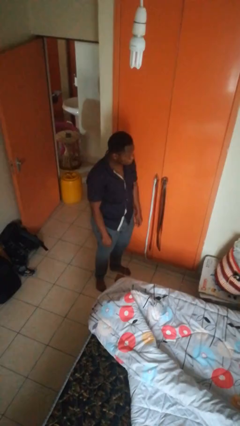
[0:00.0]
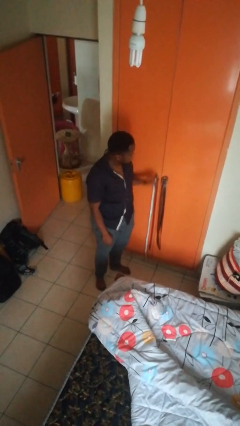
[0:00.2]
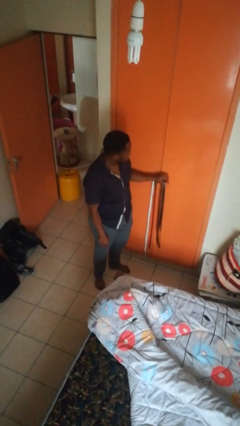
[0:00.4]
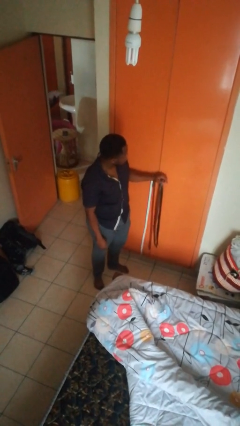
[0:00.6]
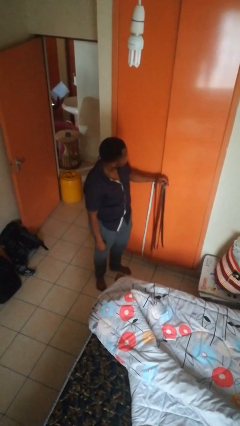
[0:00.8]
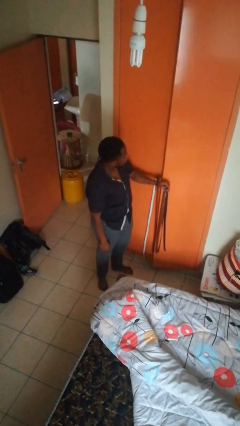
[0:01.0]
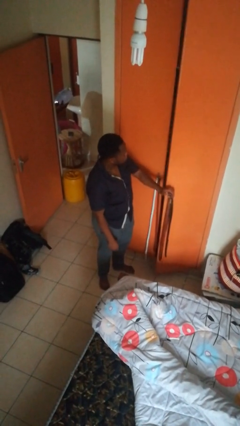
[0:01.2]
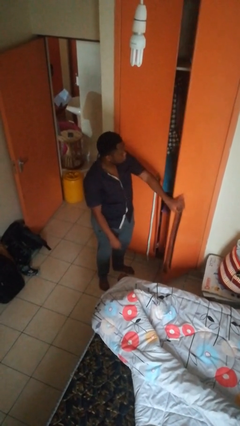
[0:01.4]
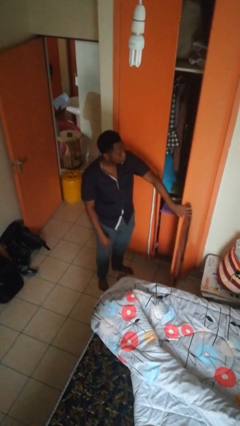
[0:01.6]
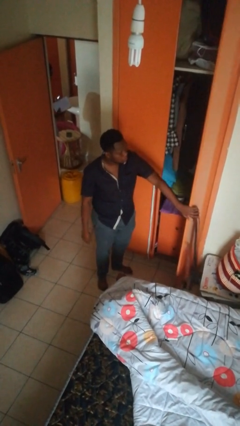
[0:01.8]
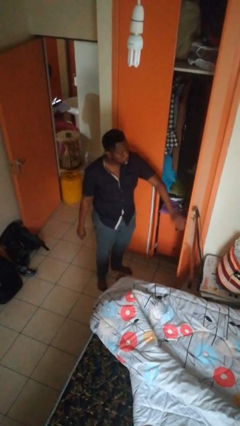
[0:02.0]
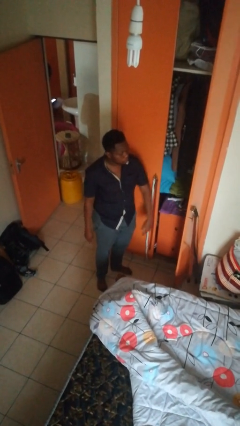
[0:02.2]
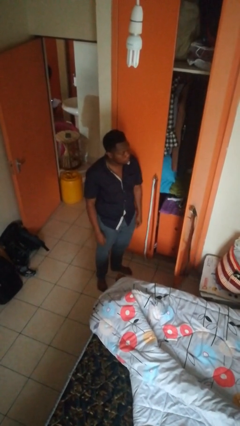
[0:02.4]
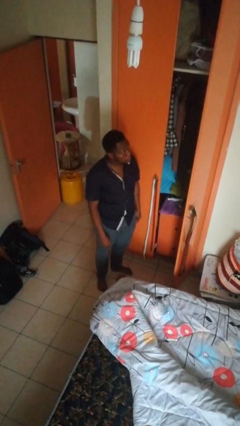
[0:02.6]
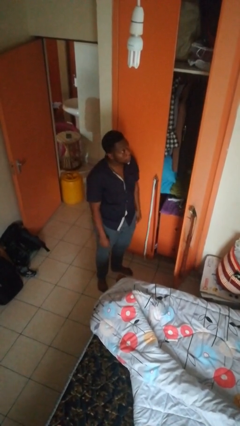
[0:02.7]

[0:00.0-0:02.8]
person opens closet door

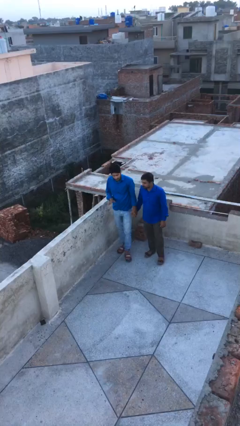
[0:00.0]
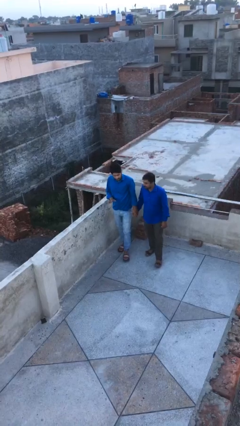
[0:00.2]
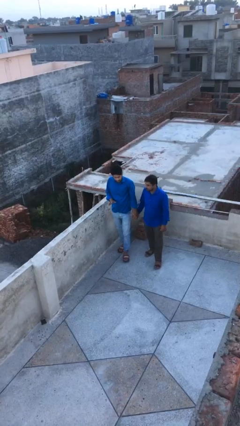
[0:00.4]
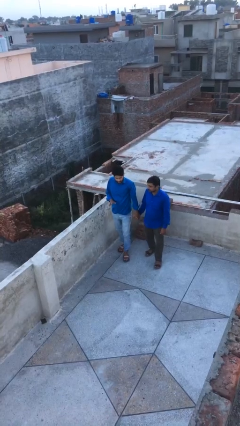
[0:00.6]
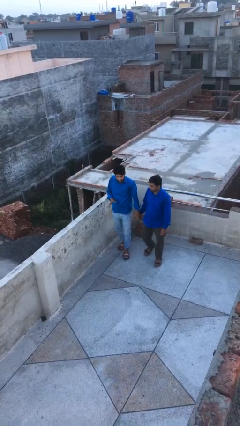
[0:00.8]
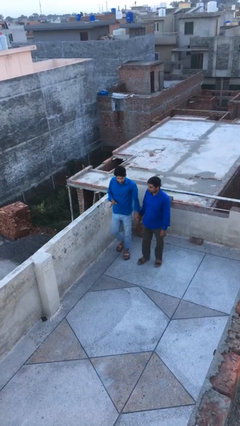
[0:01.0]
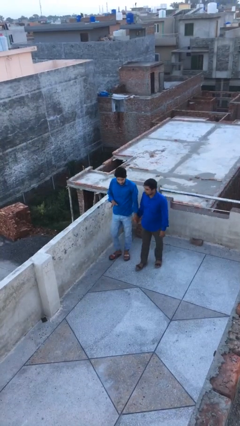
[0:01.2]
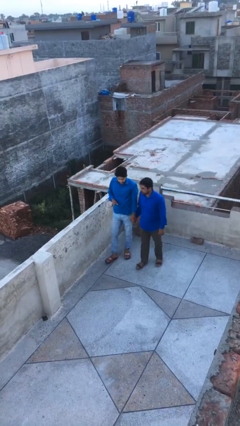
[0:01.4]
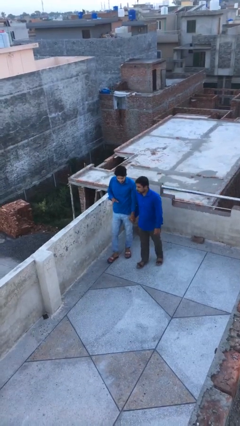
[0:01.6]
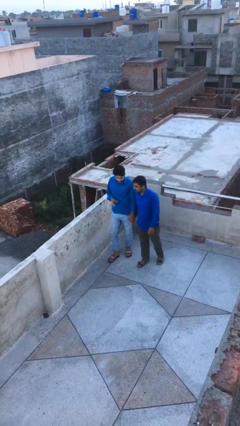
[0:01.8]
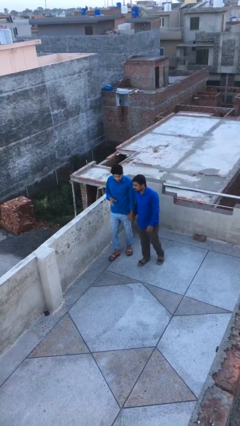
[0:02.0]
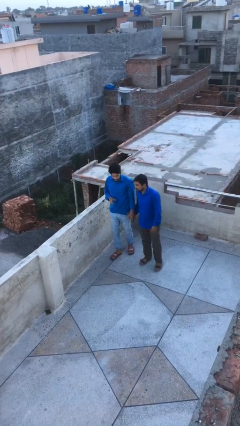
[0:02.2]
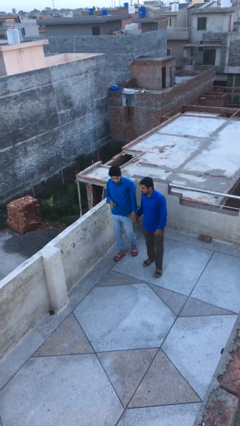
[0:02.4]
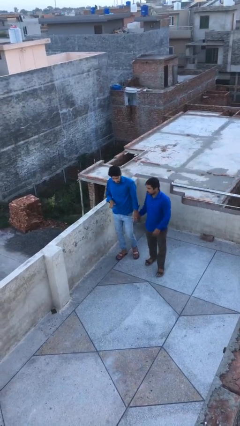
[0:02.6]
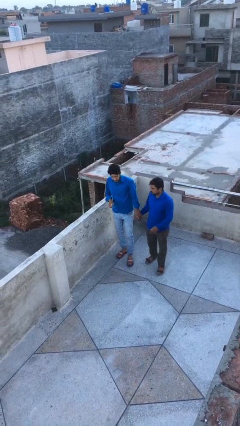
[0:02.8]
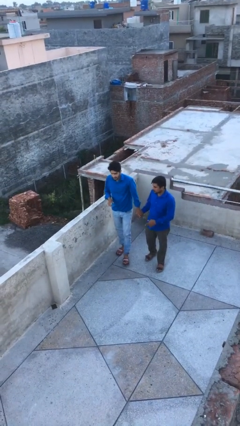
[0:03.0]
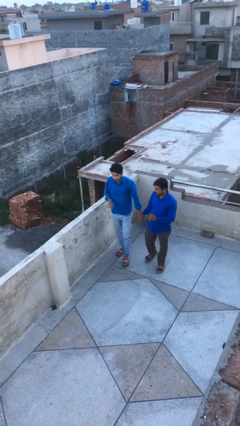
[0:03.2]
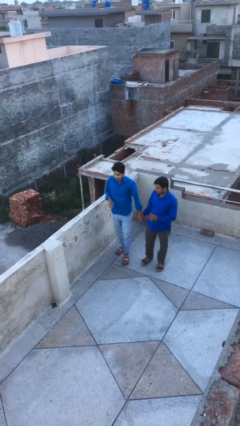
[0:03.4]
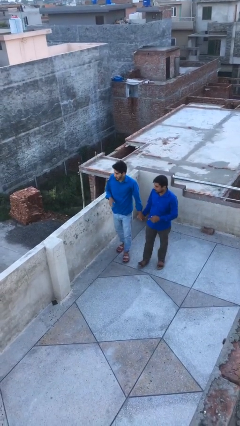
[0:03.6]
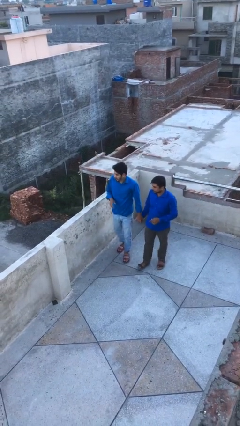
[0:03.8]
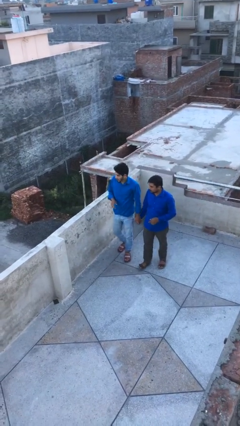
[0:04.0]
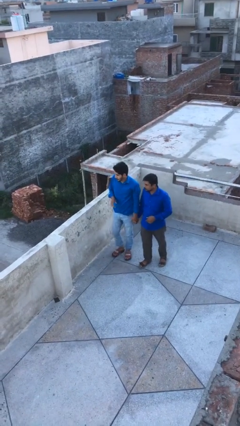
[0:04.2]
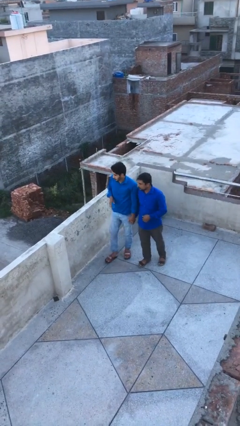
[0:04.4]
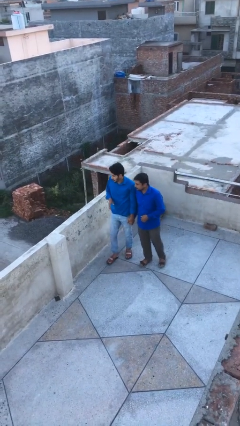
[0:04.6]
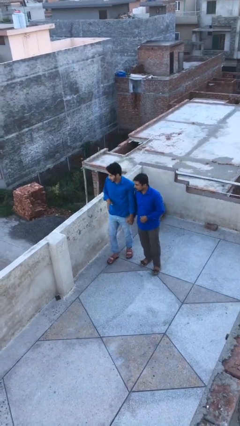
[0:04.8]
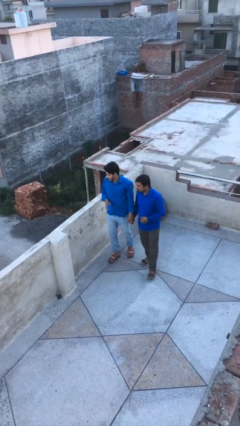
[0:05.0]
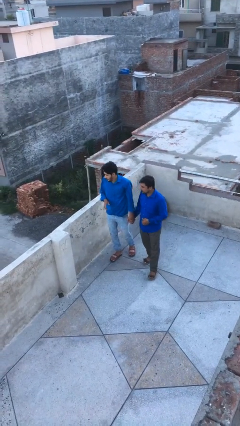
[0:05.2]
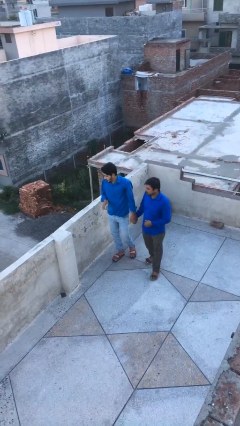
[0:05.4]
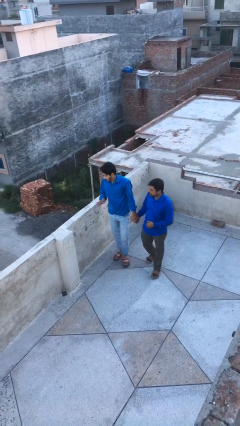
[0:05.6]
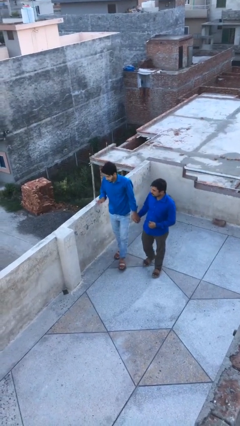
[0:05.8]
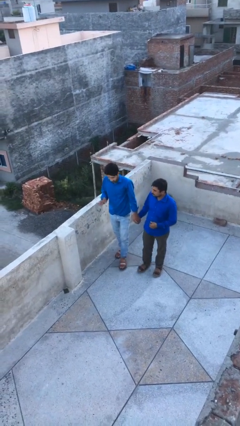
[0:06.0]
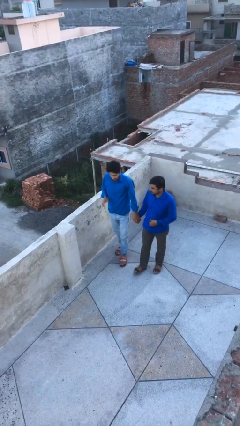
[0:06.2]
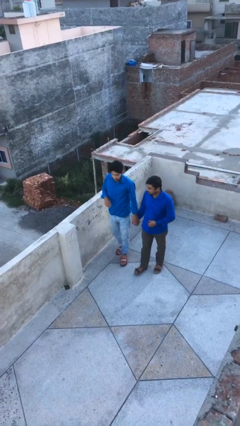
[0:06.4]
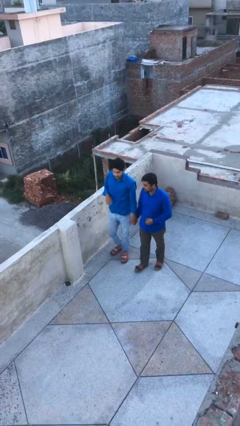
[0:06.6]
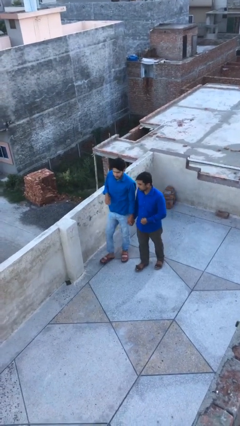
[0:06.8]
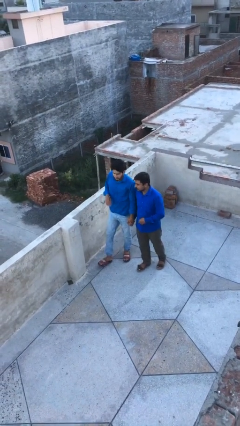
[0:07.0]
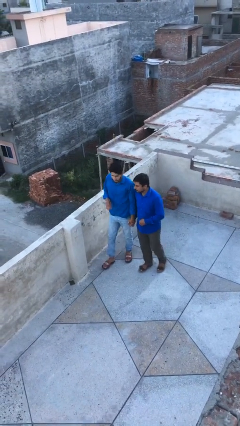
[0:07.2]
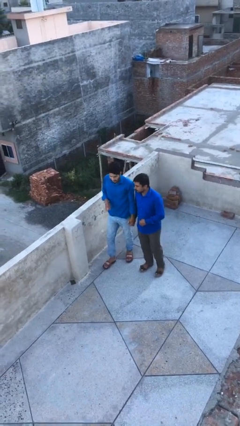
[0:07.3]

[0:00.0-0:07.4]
person holds hand

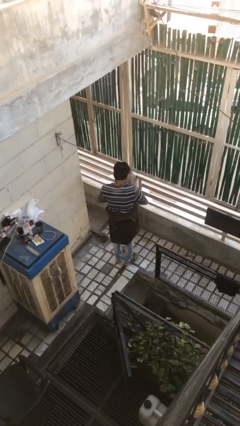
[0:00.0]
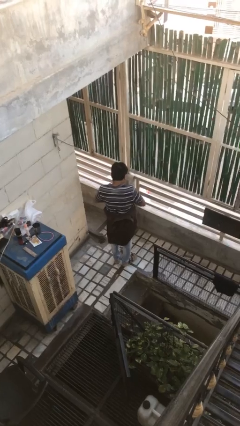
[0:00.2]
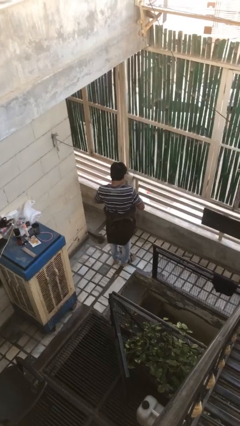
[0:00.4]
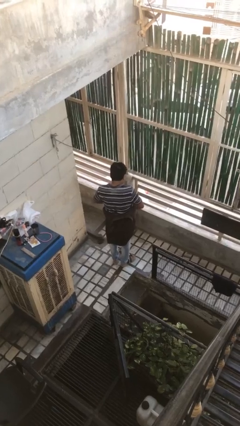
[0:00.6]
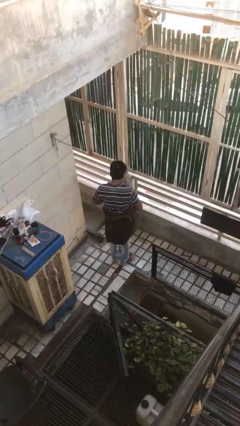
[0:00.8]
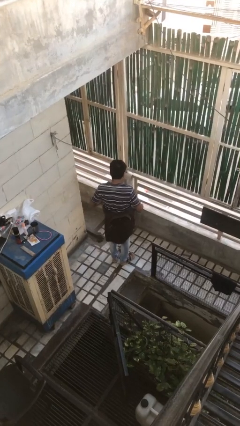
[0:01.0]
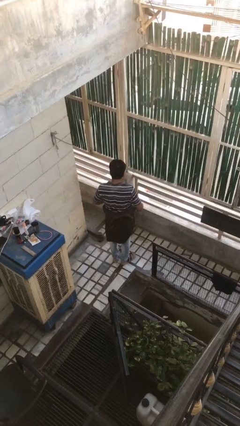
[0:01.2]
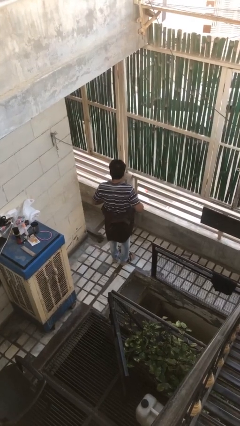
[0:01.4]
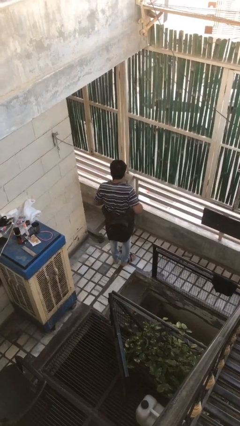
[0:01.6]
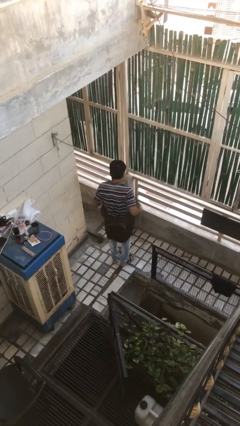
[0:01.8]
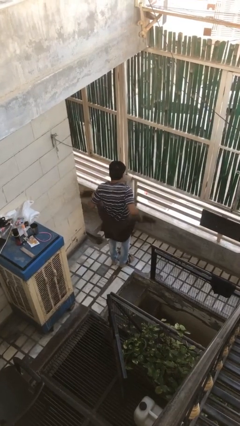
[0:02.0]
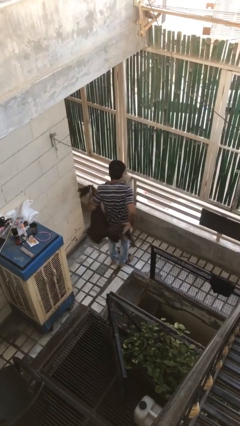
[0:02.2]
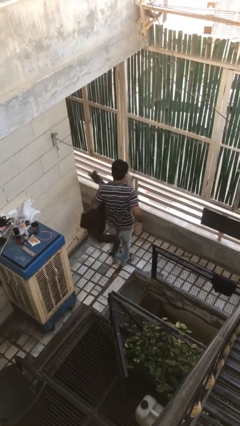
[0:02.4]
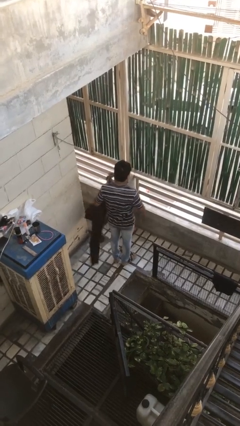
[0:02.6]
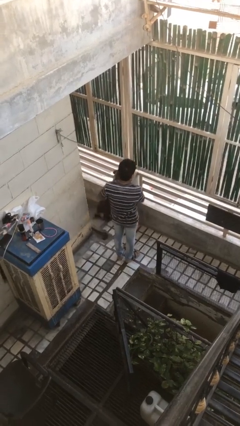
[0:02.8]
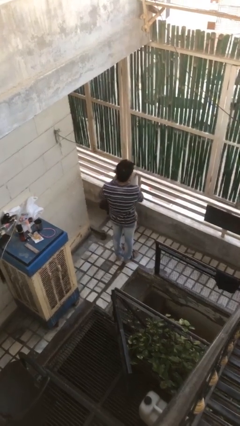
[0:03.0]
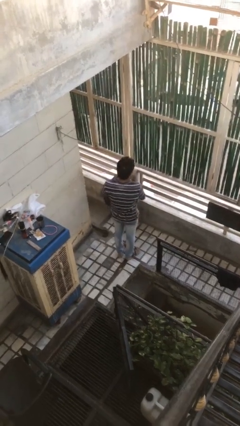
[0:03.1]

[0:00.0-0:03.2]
person unties jacket around waist

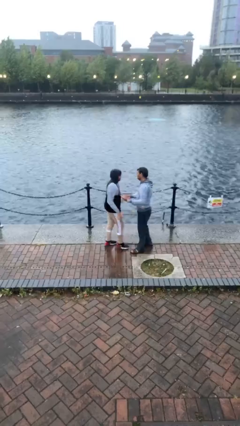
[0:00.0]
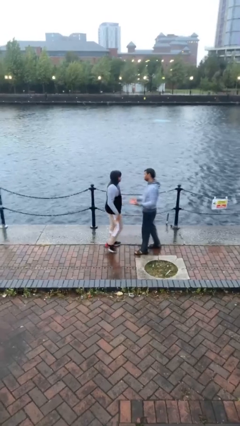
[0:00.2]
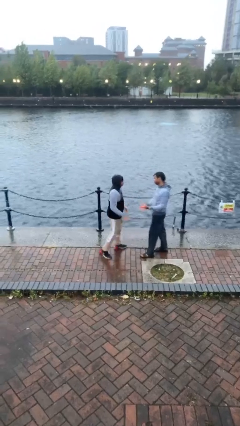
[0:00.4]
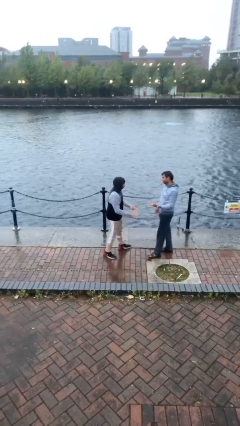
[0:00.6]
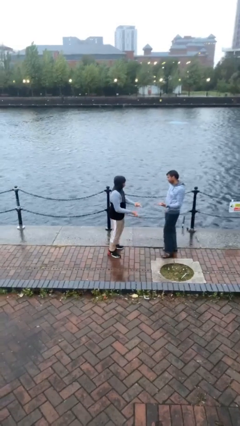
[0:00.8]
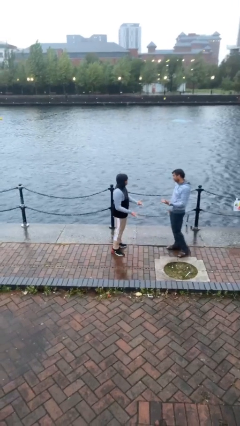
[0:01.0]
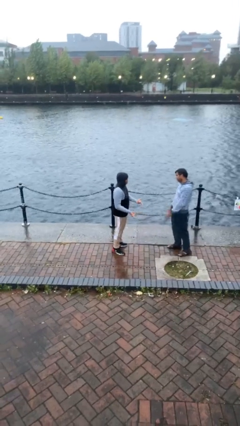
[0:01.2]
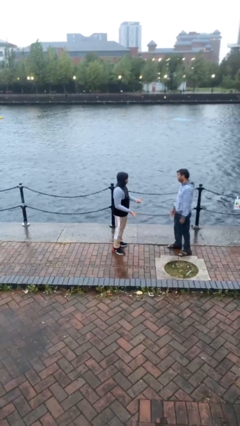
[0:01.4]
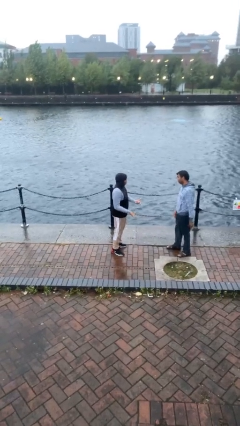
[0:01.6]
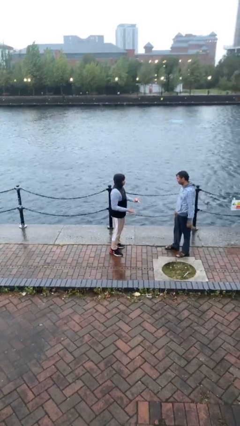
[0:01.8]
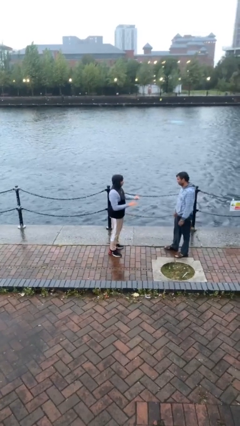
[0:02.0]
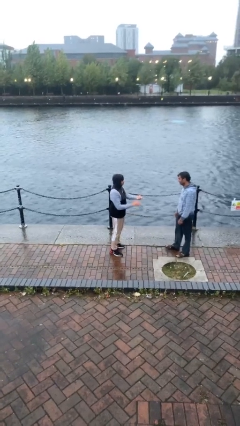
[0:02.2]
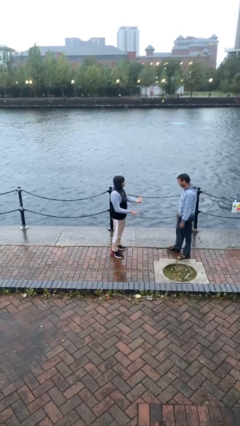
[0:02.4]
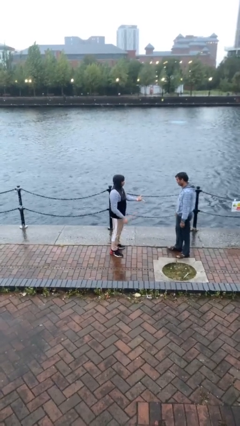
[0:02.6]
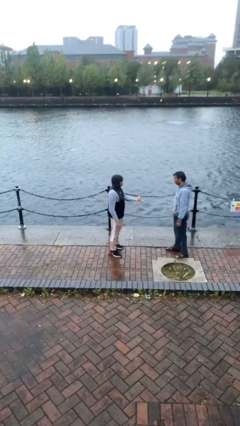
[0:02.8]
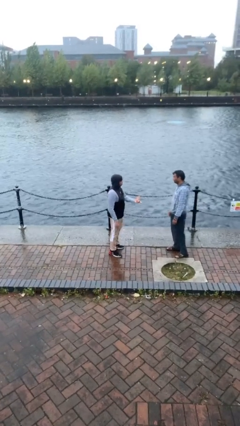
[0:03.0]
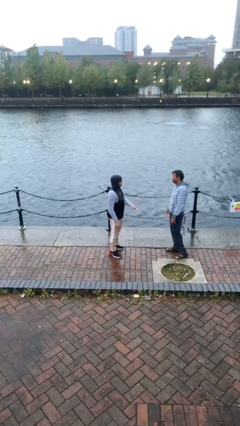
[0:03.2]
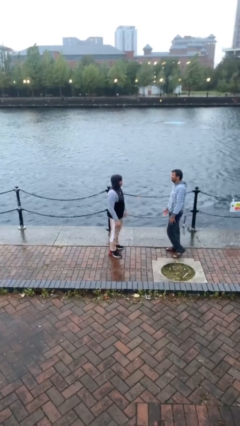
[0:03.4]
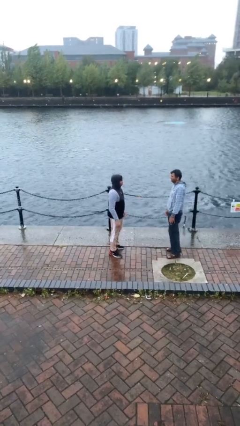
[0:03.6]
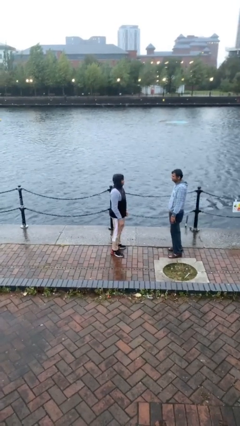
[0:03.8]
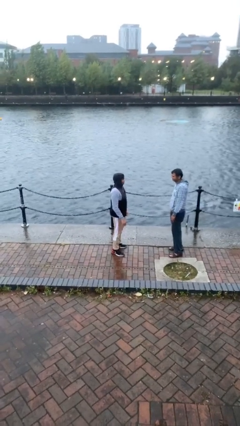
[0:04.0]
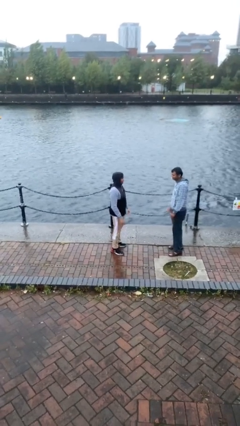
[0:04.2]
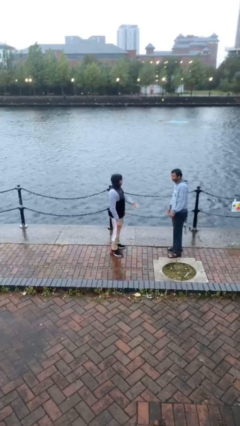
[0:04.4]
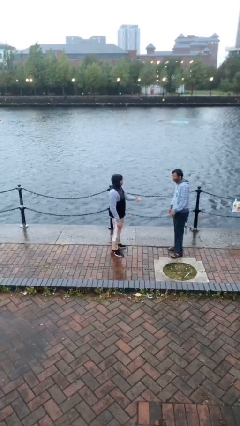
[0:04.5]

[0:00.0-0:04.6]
person talks to person
